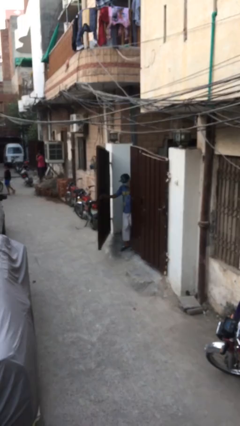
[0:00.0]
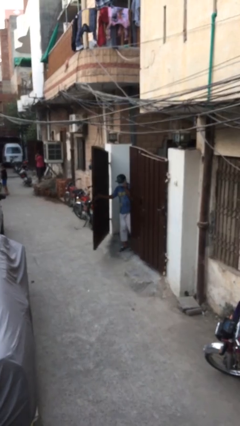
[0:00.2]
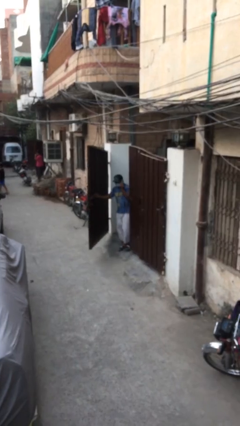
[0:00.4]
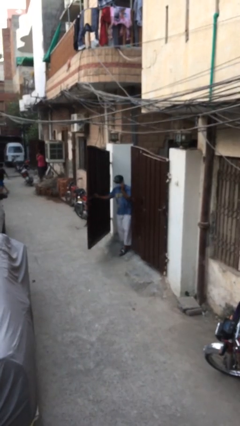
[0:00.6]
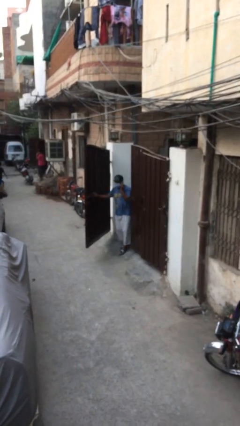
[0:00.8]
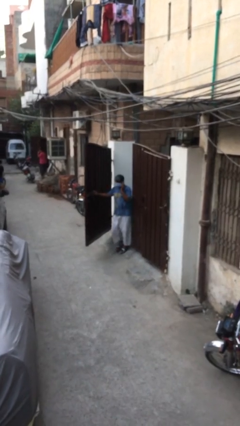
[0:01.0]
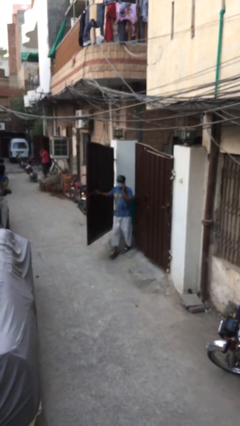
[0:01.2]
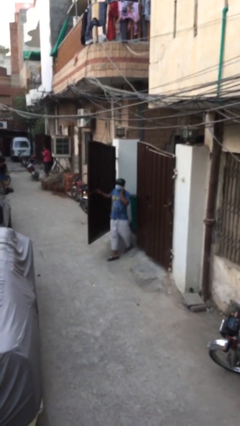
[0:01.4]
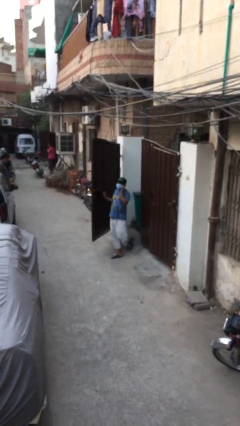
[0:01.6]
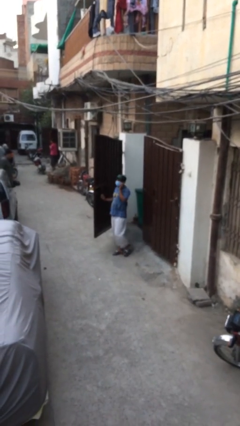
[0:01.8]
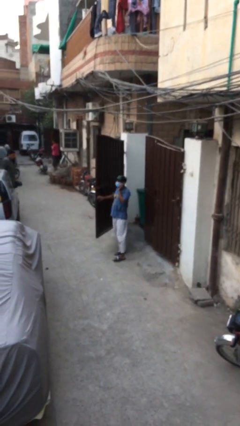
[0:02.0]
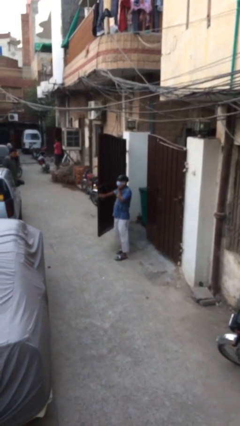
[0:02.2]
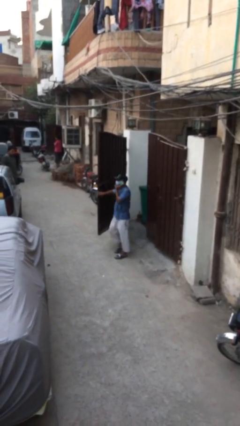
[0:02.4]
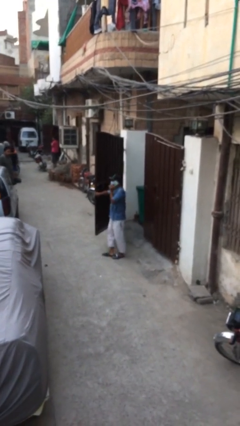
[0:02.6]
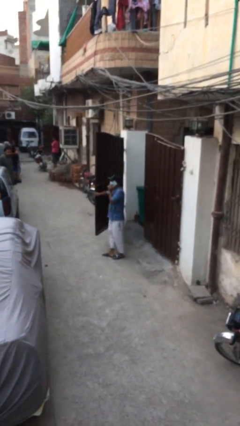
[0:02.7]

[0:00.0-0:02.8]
person enters scene through structure

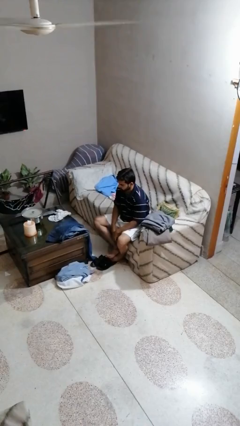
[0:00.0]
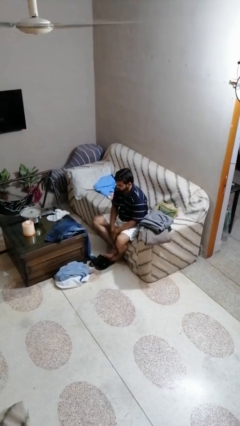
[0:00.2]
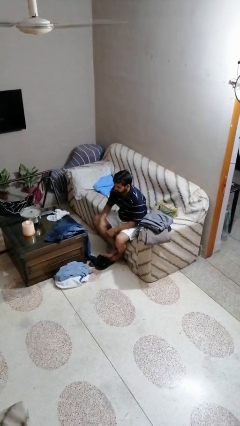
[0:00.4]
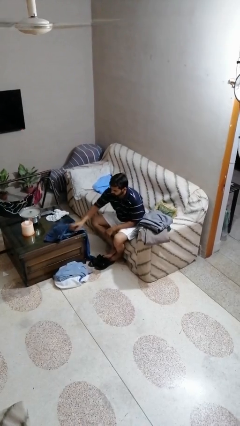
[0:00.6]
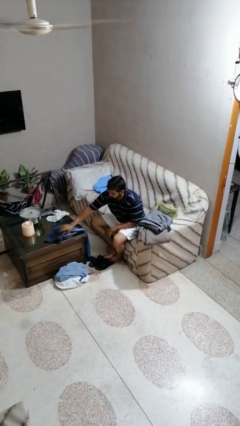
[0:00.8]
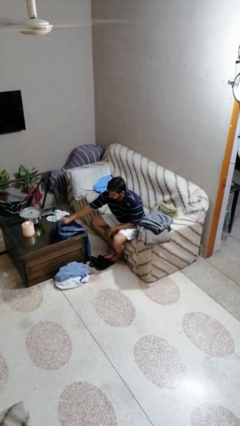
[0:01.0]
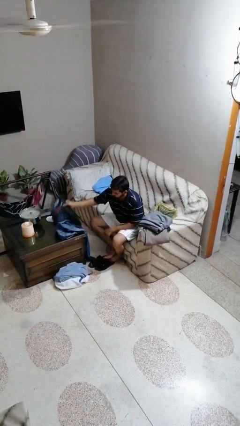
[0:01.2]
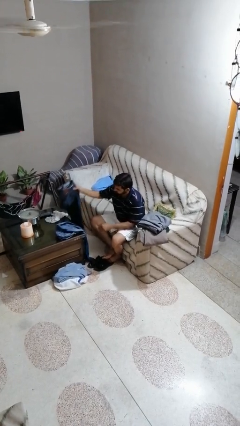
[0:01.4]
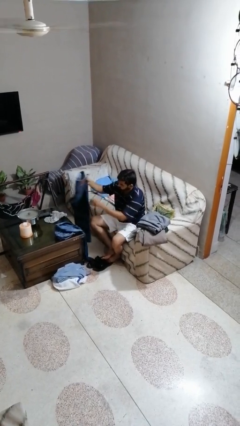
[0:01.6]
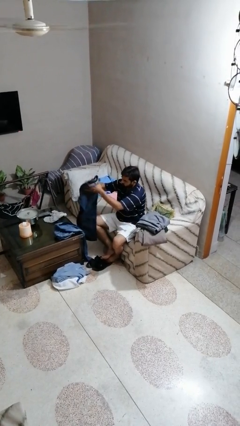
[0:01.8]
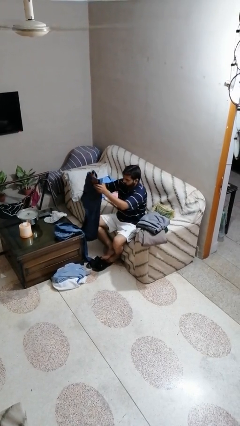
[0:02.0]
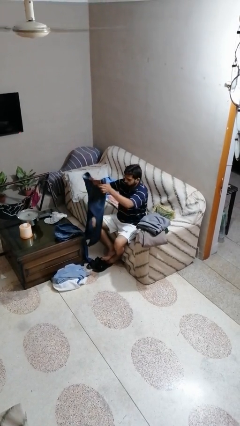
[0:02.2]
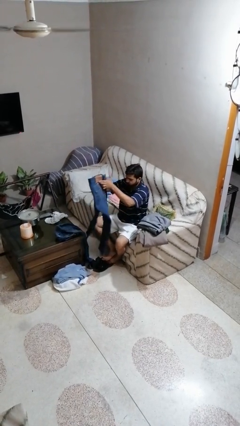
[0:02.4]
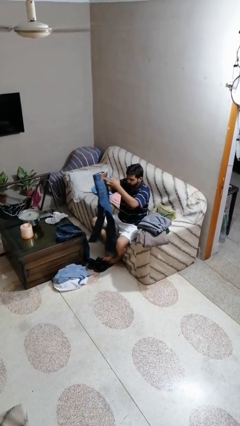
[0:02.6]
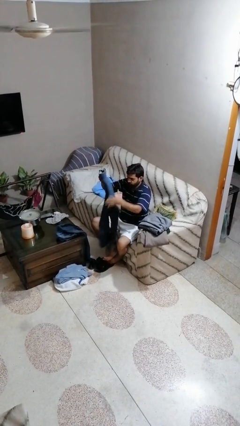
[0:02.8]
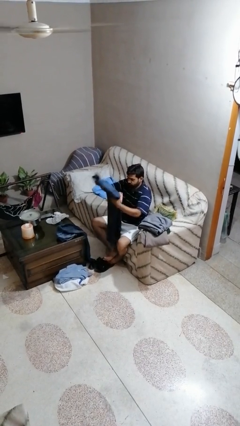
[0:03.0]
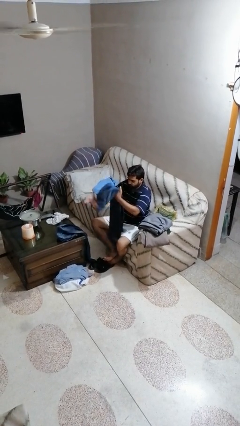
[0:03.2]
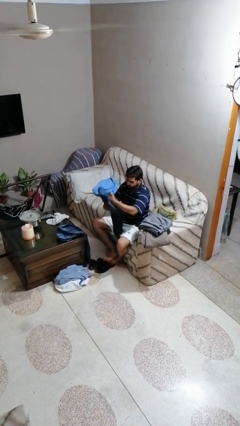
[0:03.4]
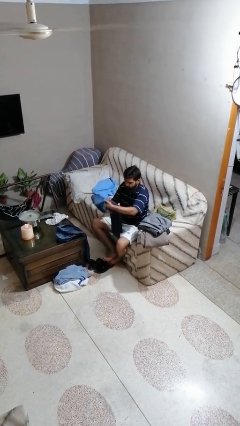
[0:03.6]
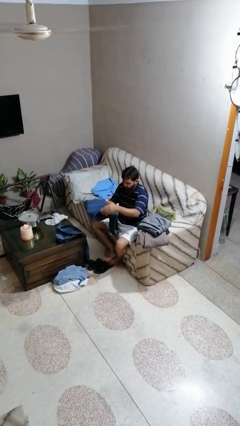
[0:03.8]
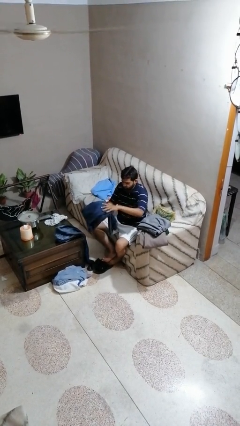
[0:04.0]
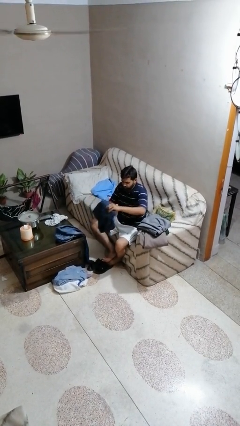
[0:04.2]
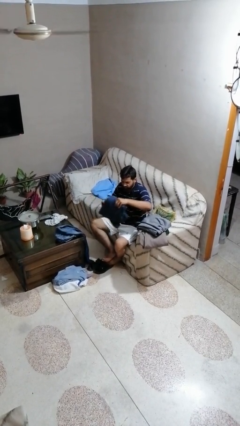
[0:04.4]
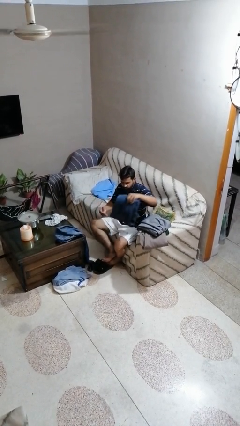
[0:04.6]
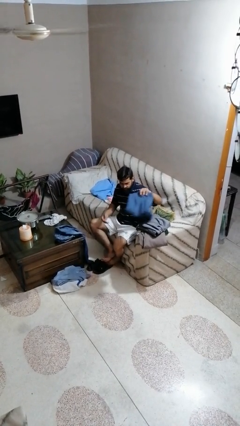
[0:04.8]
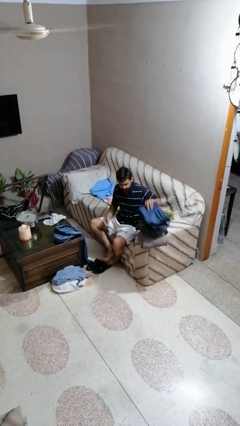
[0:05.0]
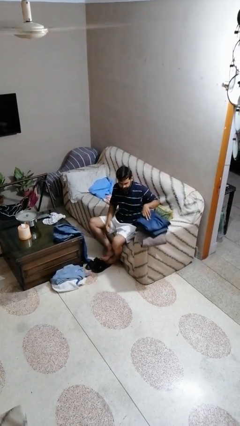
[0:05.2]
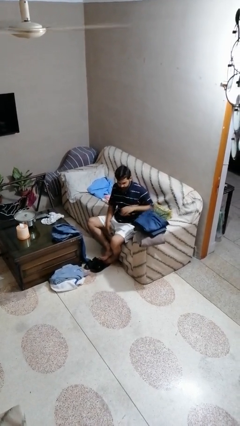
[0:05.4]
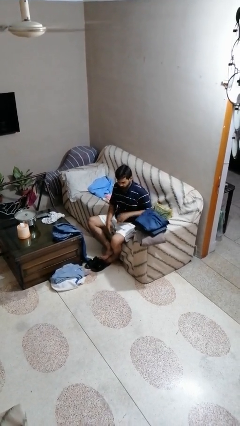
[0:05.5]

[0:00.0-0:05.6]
person folds pants

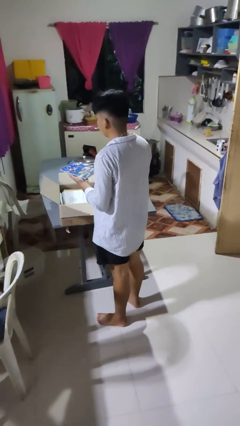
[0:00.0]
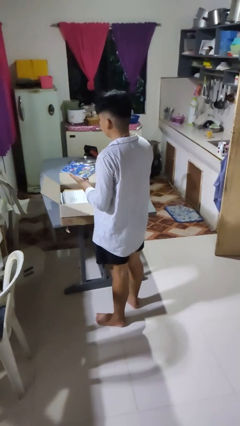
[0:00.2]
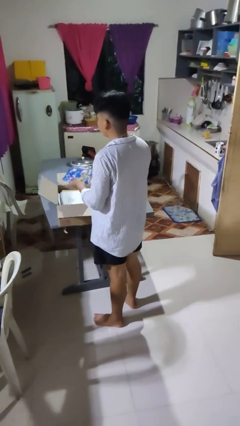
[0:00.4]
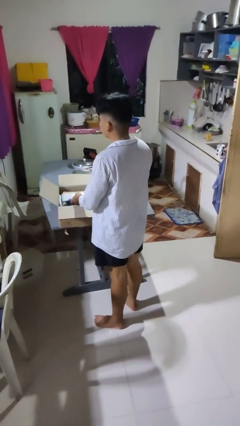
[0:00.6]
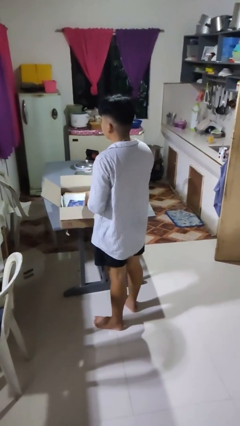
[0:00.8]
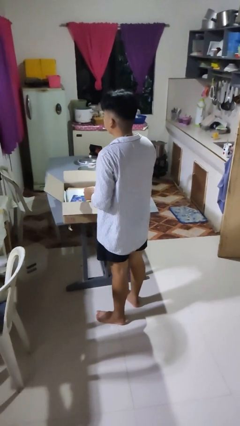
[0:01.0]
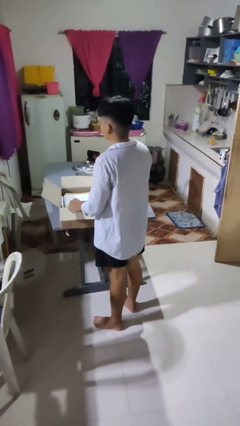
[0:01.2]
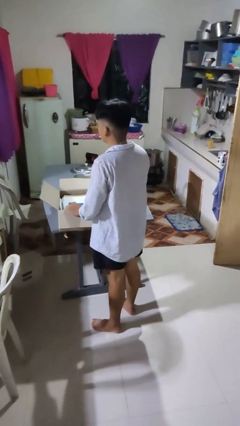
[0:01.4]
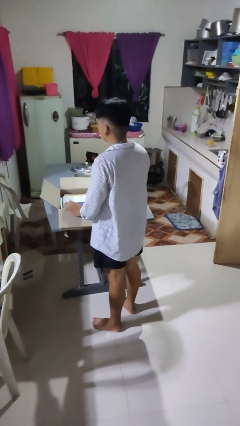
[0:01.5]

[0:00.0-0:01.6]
person puts object into box

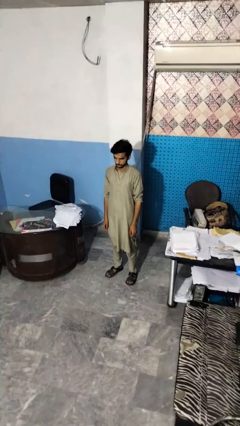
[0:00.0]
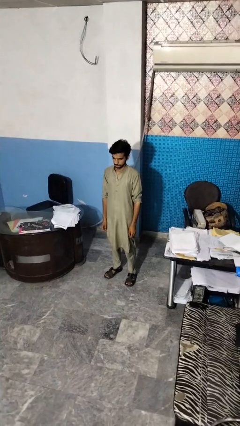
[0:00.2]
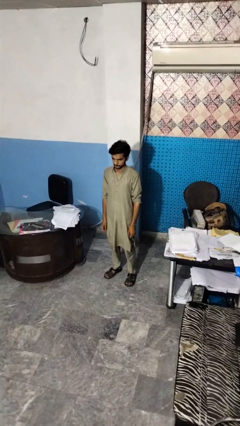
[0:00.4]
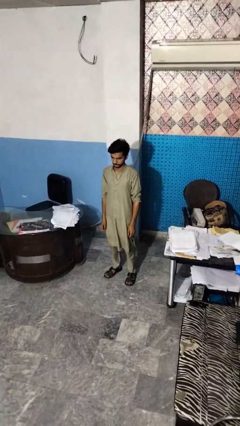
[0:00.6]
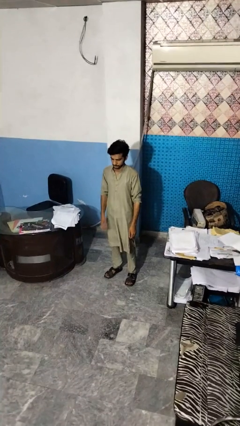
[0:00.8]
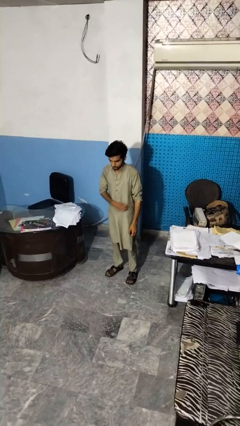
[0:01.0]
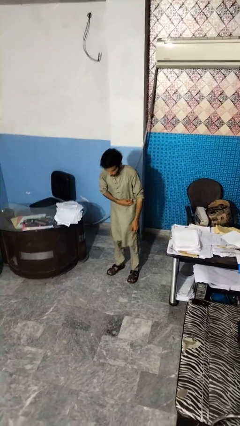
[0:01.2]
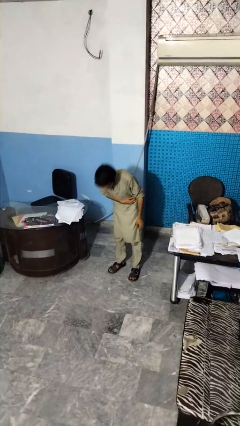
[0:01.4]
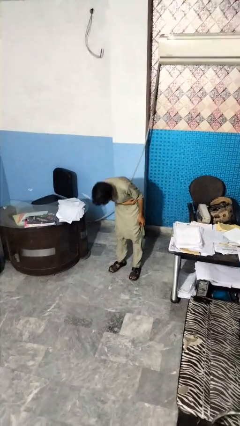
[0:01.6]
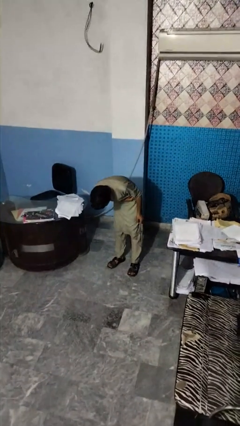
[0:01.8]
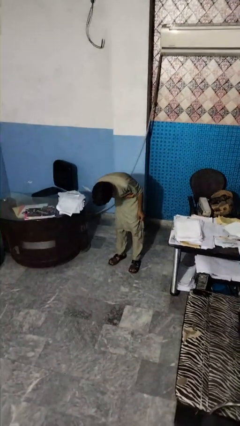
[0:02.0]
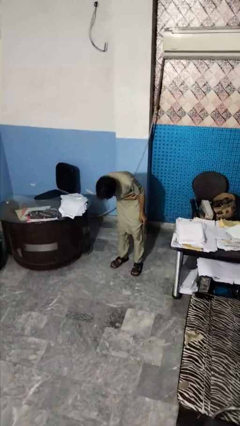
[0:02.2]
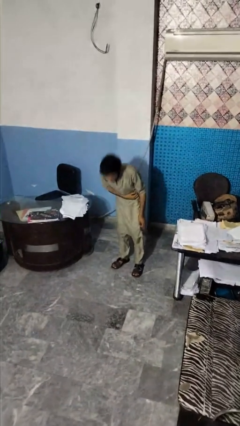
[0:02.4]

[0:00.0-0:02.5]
person bows

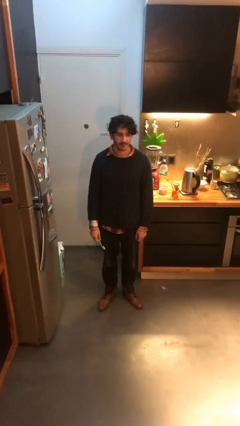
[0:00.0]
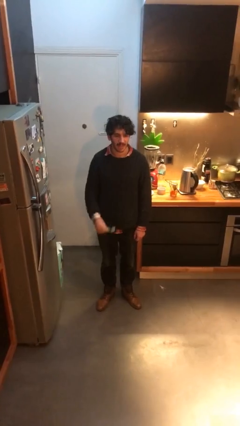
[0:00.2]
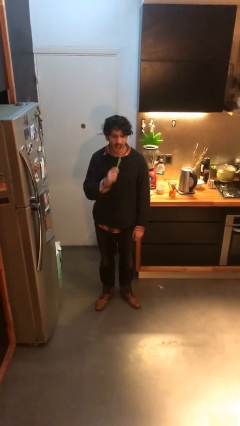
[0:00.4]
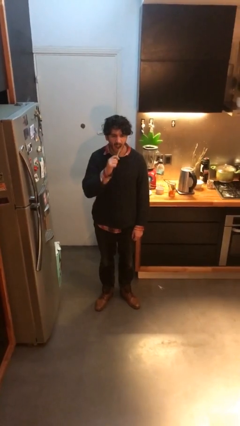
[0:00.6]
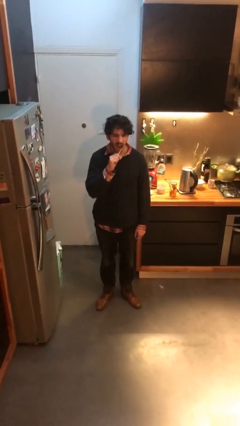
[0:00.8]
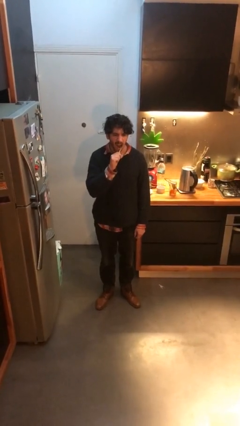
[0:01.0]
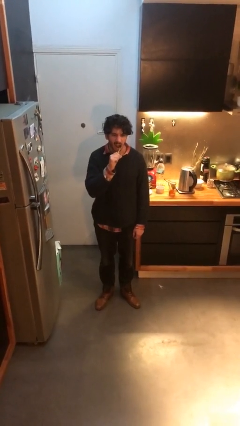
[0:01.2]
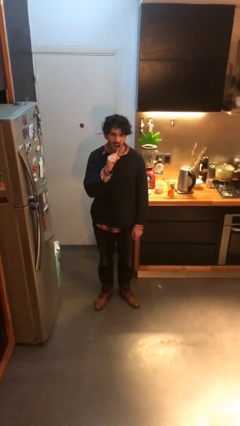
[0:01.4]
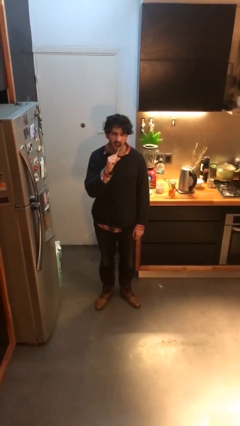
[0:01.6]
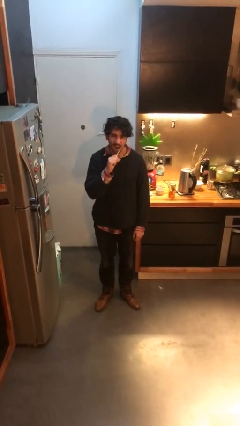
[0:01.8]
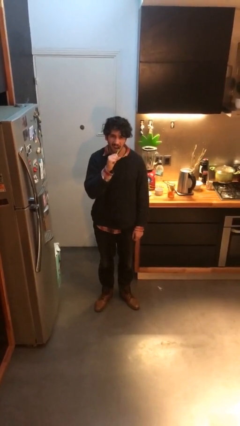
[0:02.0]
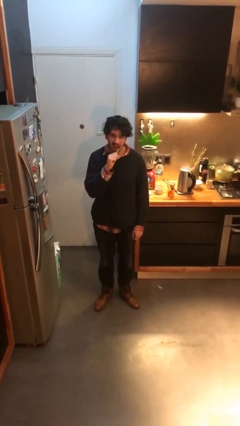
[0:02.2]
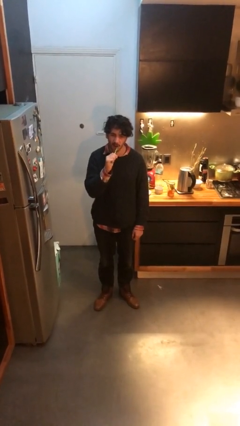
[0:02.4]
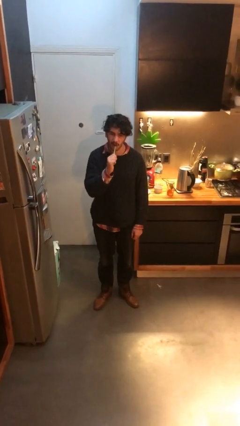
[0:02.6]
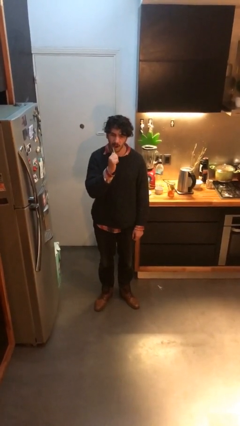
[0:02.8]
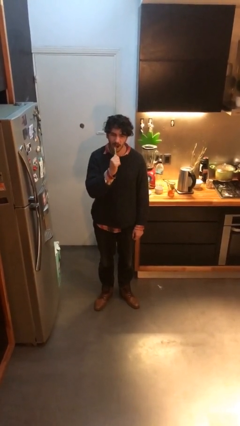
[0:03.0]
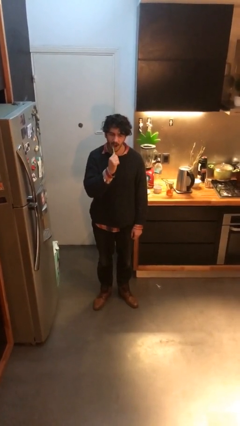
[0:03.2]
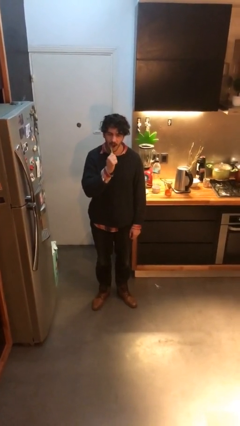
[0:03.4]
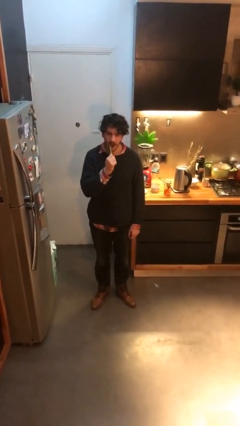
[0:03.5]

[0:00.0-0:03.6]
person brushes teeth

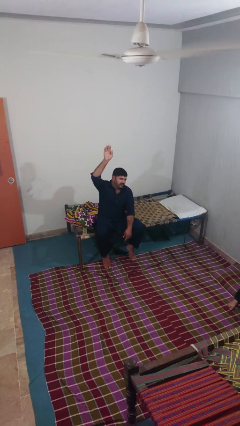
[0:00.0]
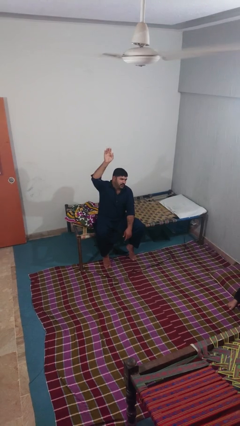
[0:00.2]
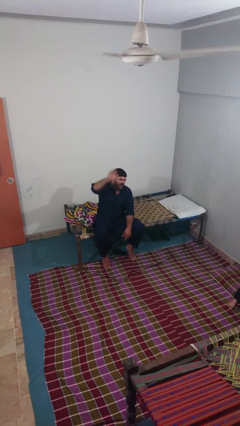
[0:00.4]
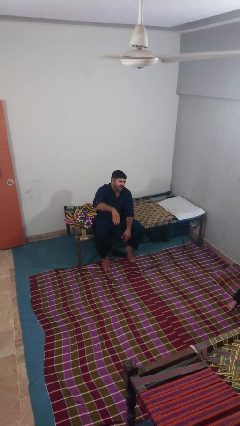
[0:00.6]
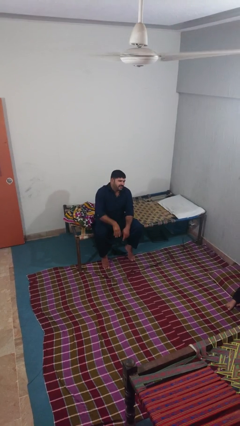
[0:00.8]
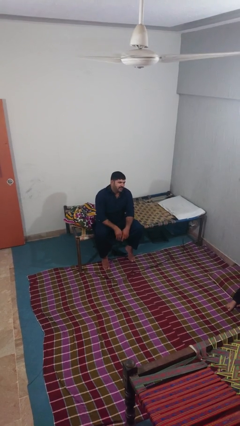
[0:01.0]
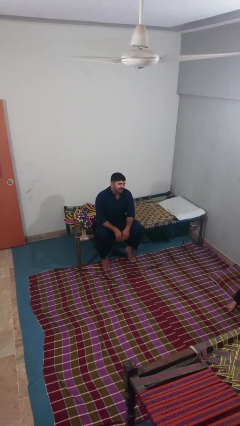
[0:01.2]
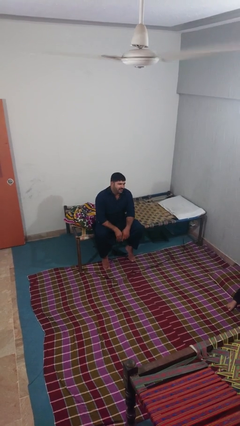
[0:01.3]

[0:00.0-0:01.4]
person gestures lower hand
